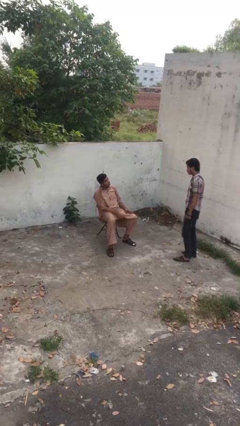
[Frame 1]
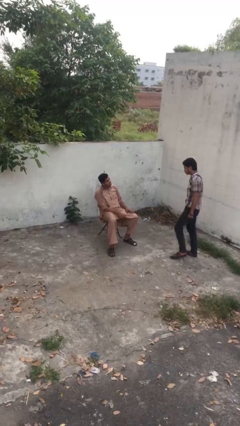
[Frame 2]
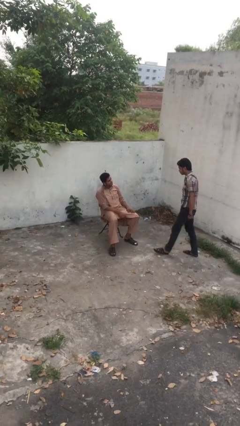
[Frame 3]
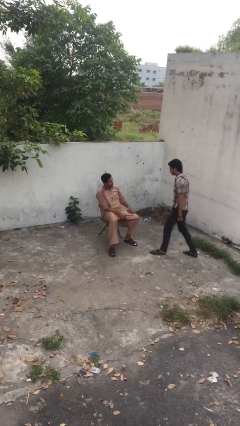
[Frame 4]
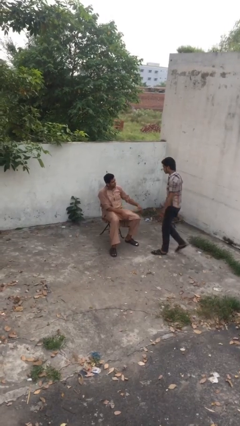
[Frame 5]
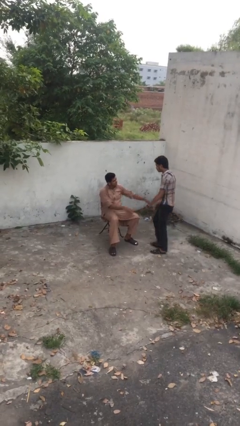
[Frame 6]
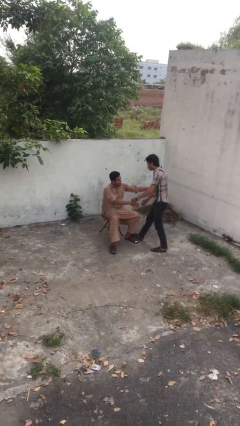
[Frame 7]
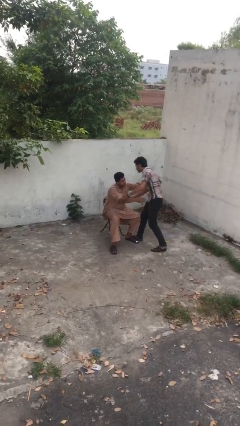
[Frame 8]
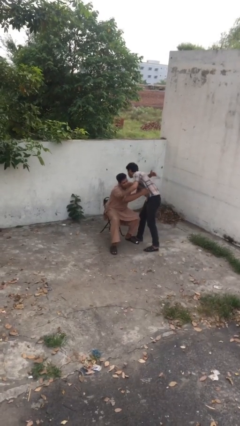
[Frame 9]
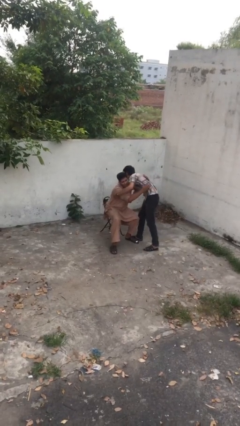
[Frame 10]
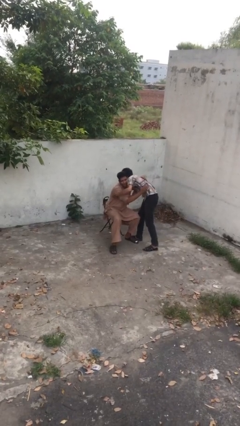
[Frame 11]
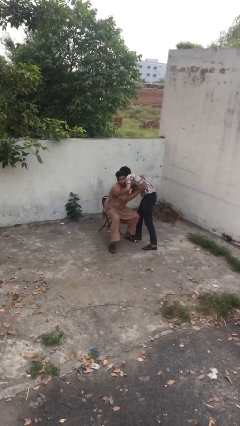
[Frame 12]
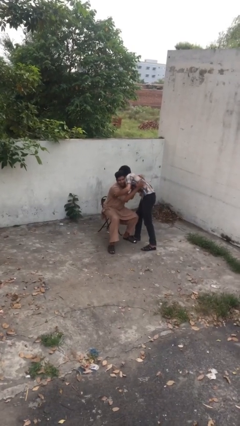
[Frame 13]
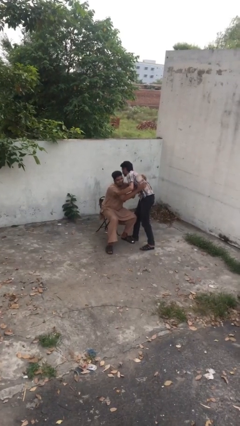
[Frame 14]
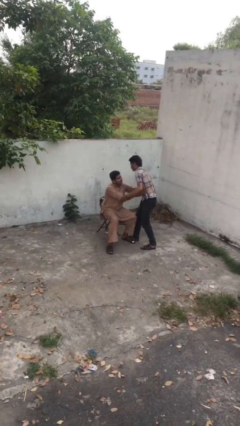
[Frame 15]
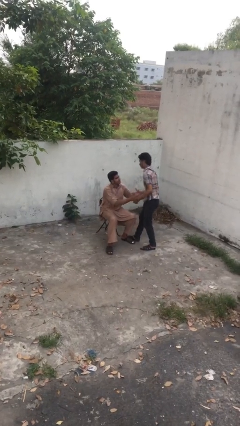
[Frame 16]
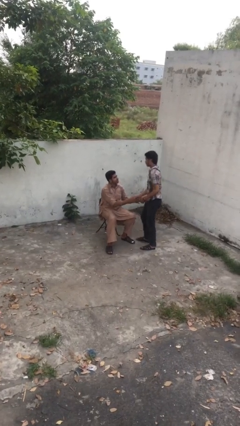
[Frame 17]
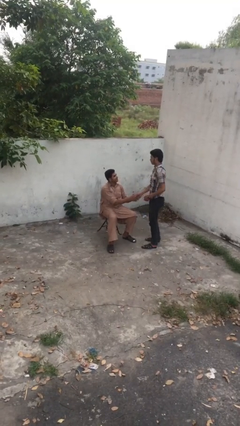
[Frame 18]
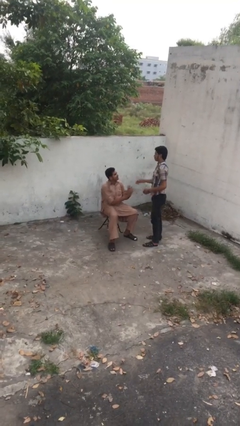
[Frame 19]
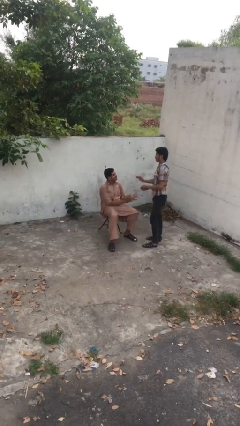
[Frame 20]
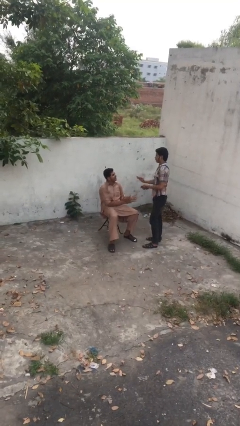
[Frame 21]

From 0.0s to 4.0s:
person embraces person

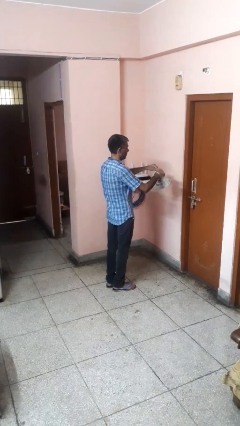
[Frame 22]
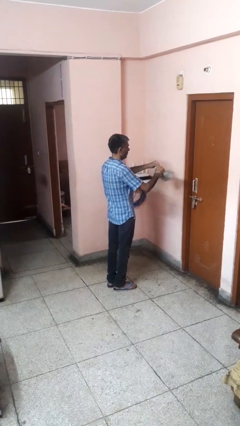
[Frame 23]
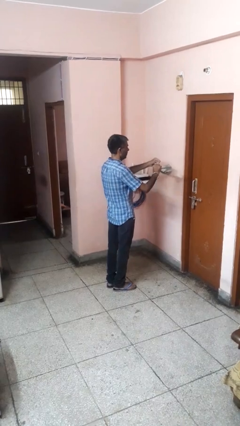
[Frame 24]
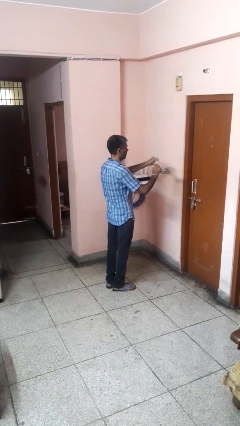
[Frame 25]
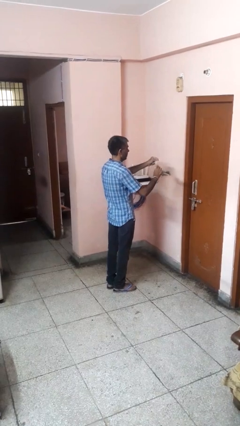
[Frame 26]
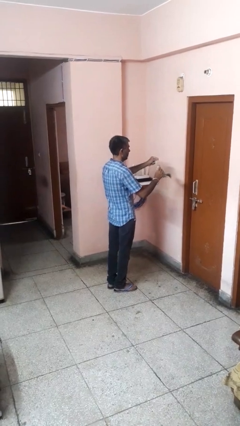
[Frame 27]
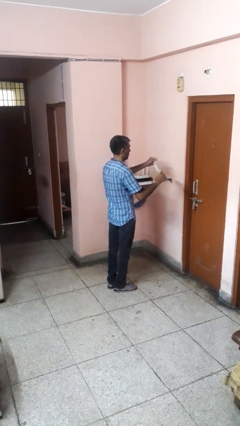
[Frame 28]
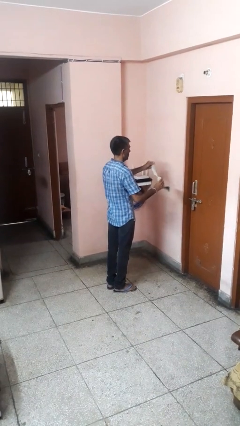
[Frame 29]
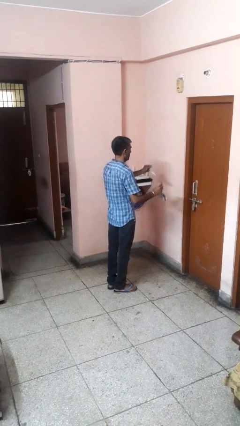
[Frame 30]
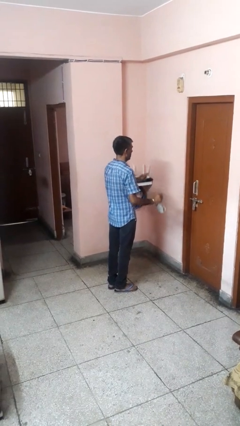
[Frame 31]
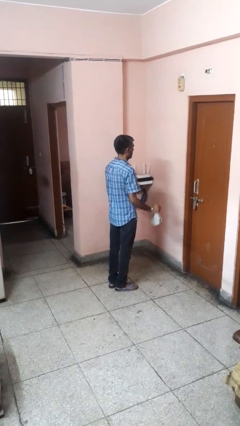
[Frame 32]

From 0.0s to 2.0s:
person tears paper

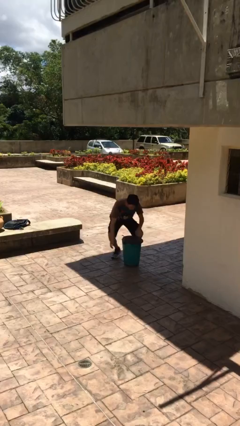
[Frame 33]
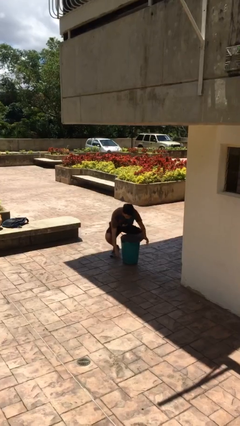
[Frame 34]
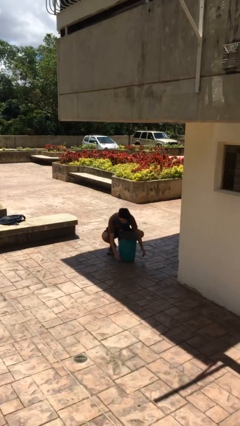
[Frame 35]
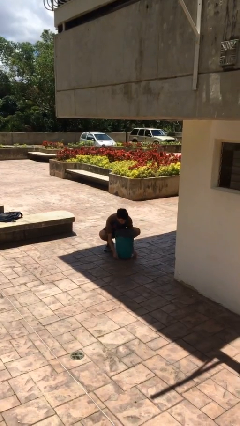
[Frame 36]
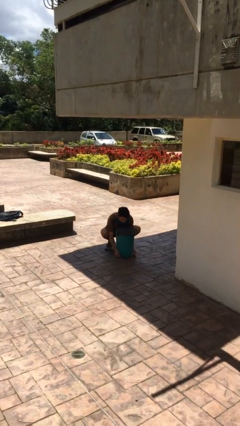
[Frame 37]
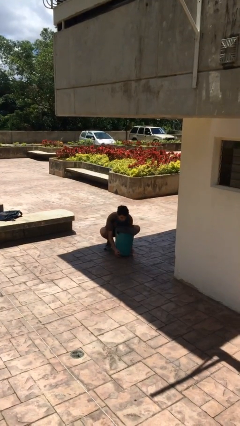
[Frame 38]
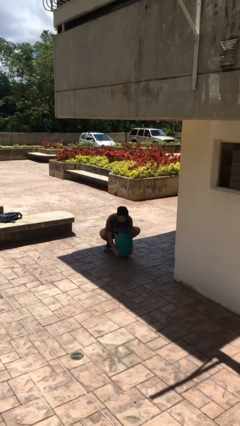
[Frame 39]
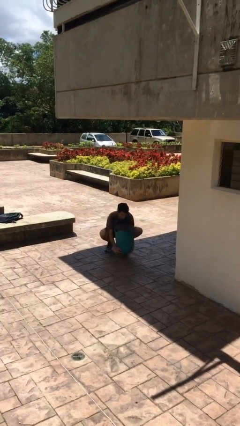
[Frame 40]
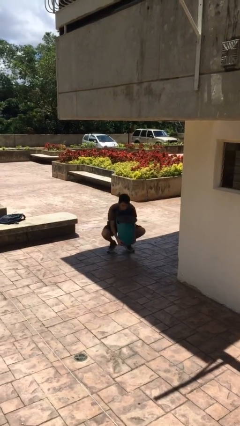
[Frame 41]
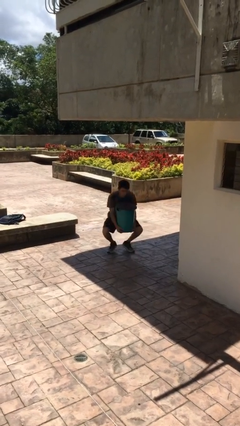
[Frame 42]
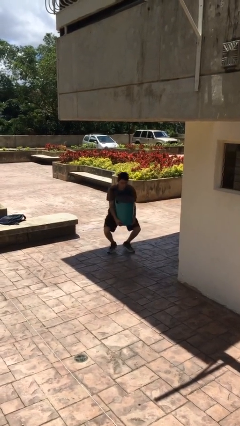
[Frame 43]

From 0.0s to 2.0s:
person picks up object from floor

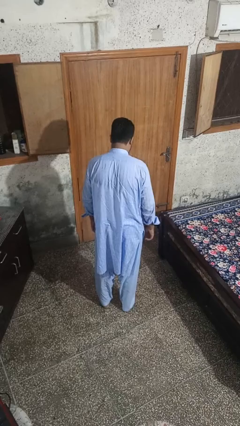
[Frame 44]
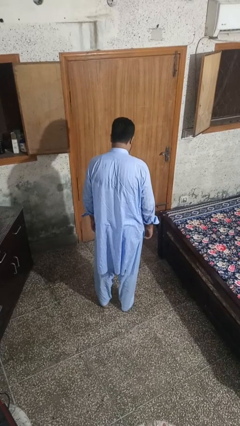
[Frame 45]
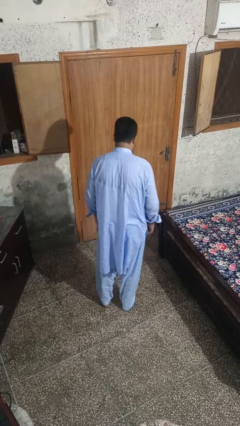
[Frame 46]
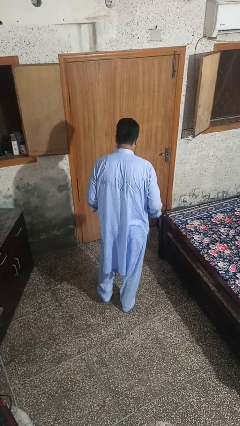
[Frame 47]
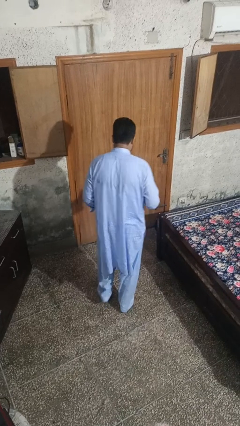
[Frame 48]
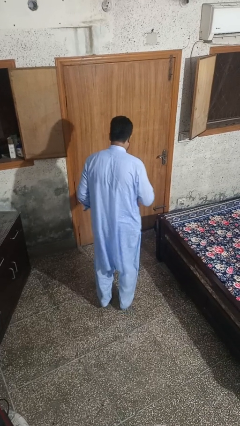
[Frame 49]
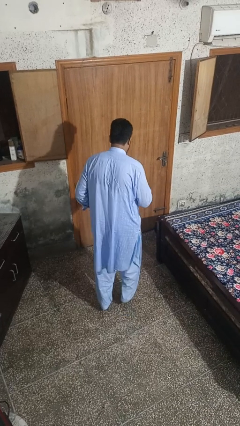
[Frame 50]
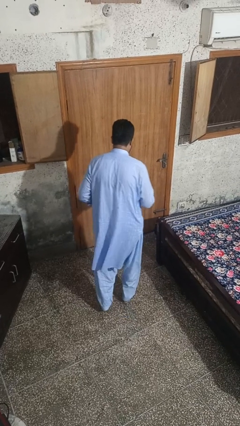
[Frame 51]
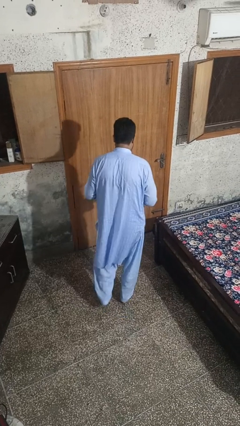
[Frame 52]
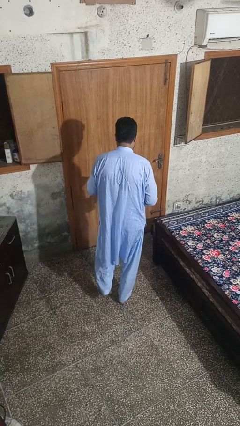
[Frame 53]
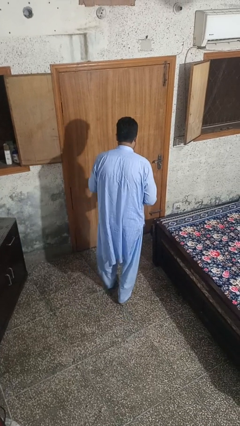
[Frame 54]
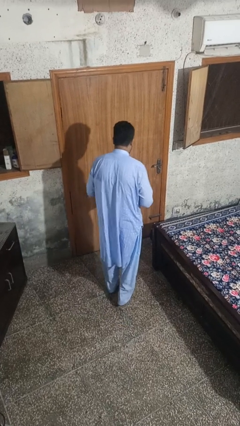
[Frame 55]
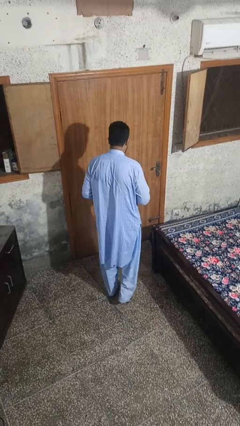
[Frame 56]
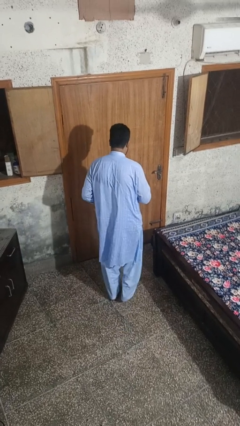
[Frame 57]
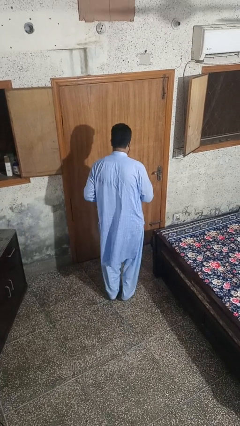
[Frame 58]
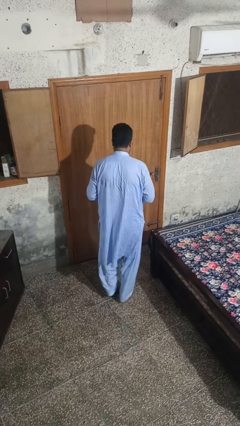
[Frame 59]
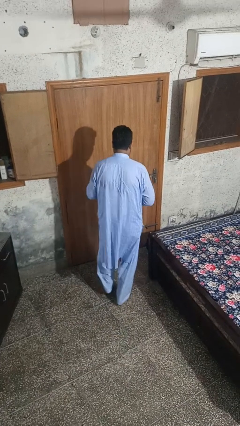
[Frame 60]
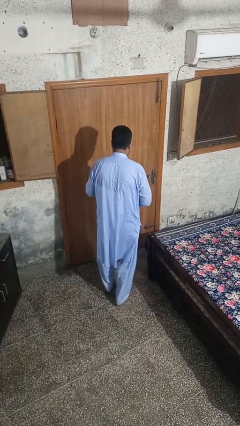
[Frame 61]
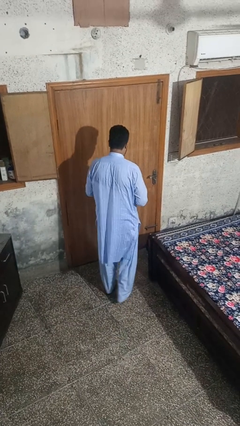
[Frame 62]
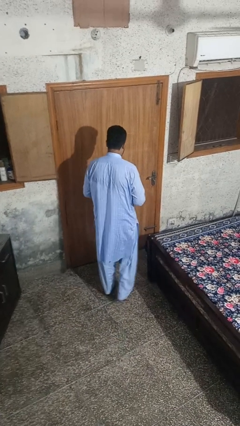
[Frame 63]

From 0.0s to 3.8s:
person walks tiptoe

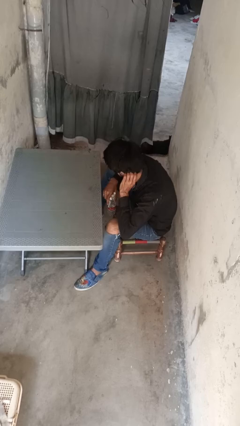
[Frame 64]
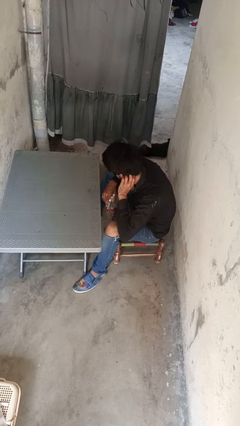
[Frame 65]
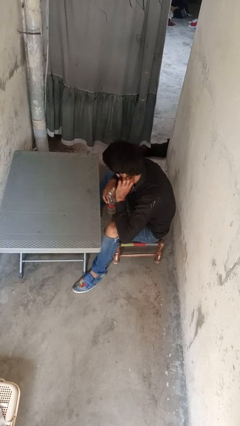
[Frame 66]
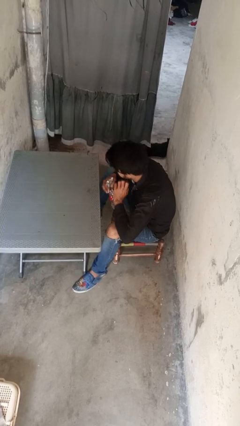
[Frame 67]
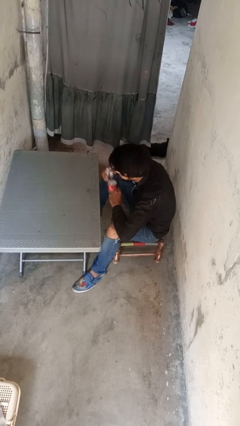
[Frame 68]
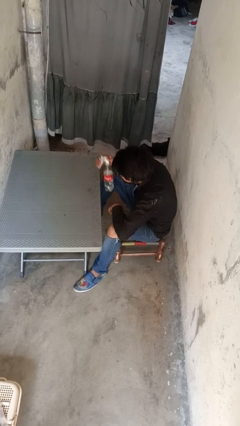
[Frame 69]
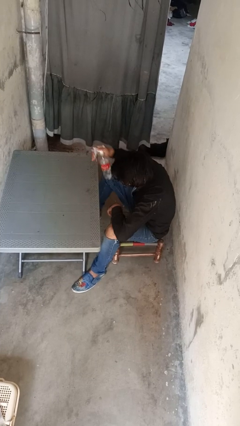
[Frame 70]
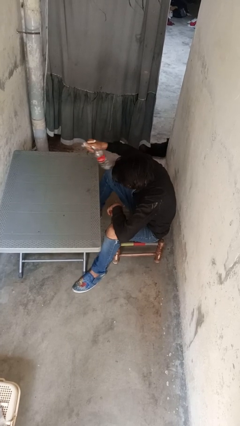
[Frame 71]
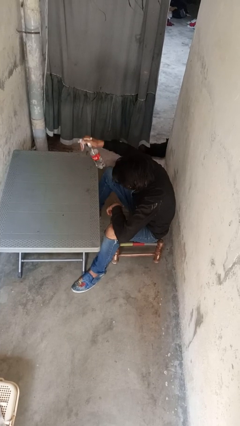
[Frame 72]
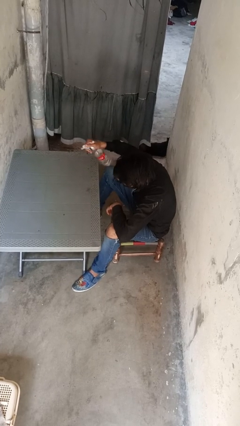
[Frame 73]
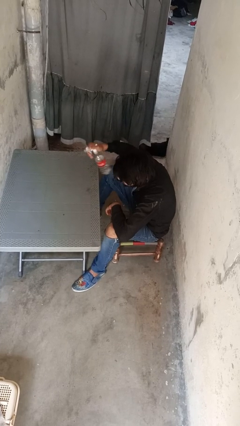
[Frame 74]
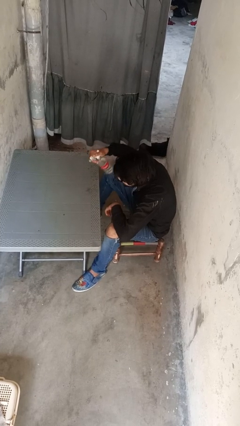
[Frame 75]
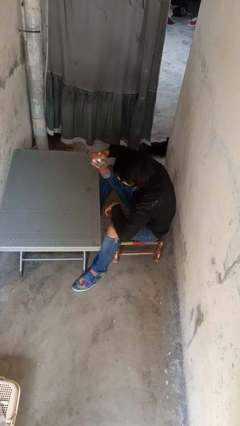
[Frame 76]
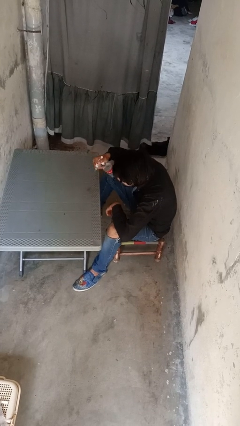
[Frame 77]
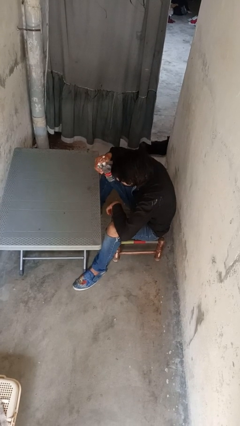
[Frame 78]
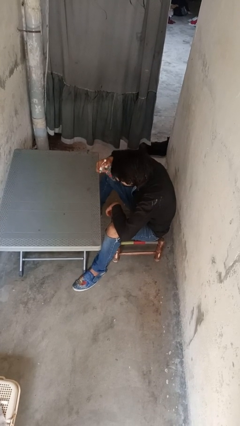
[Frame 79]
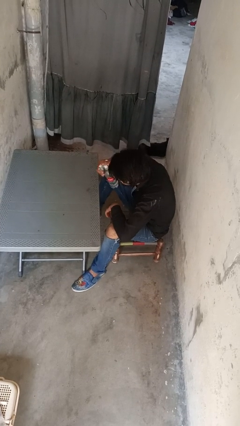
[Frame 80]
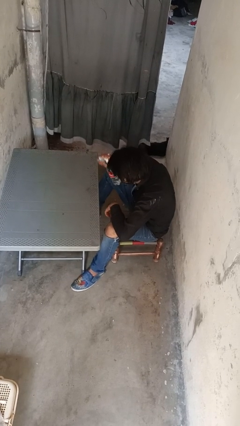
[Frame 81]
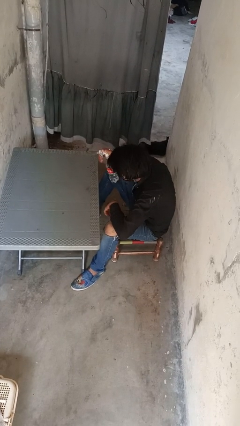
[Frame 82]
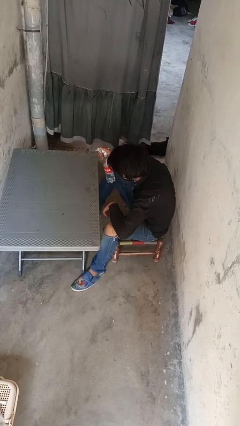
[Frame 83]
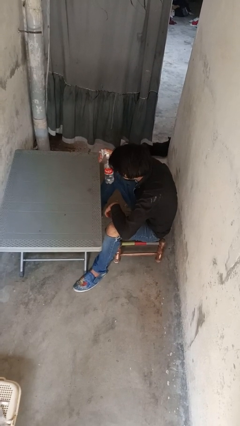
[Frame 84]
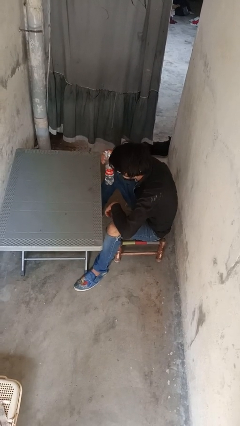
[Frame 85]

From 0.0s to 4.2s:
person sprays from bottle

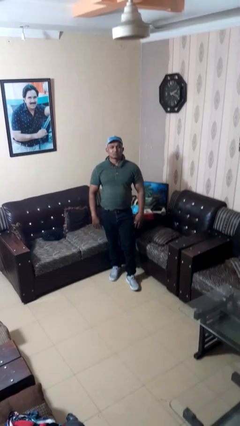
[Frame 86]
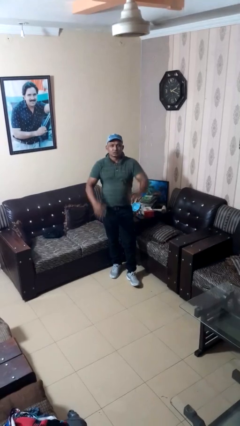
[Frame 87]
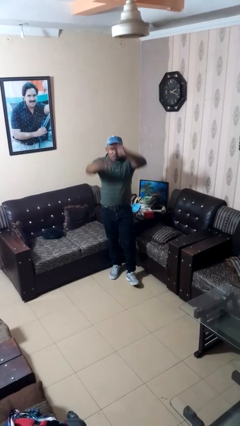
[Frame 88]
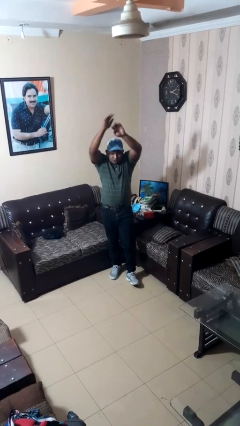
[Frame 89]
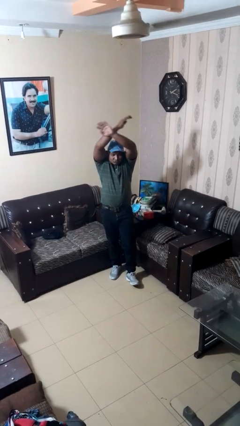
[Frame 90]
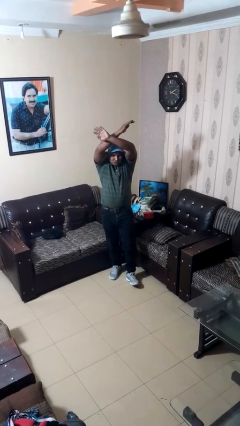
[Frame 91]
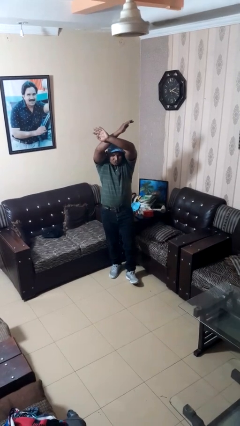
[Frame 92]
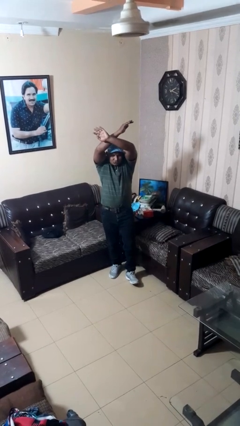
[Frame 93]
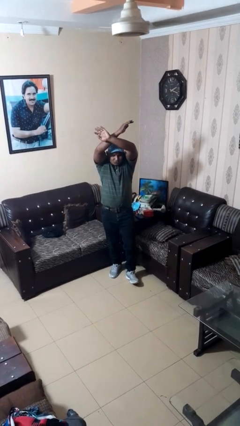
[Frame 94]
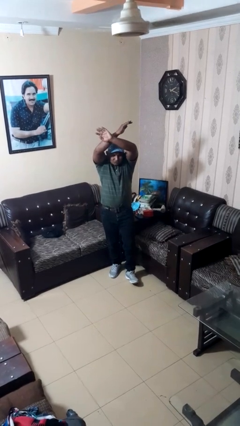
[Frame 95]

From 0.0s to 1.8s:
person gestures arms x
